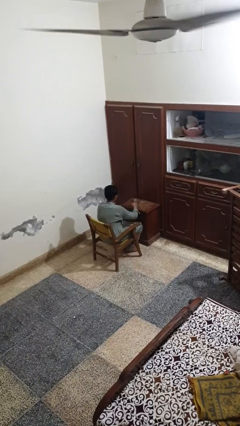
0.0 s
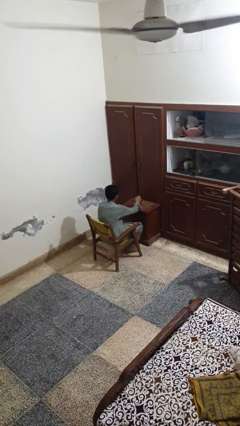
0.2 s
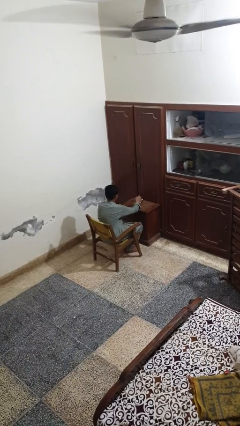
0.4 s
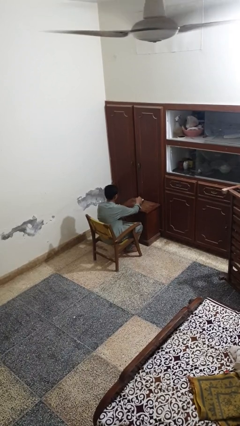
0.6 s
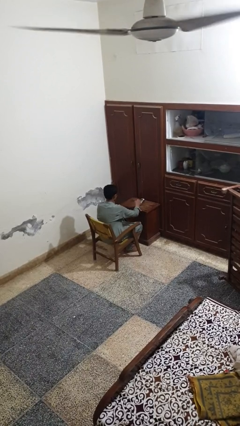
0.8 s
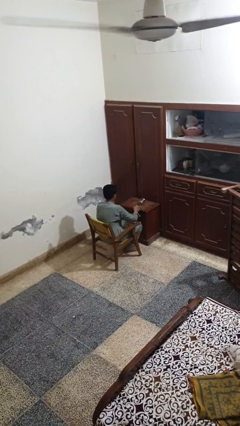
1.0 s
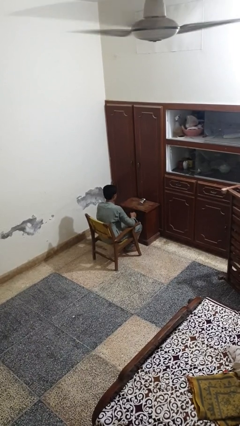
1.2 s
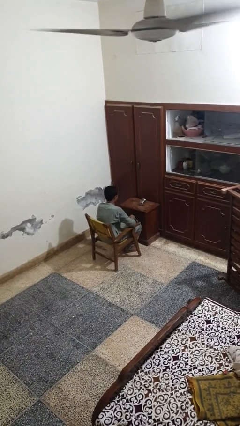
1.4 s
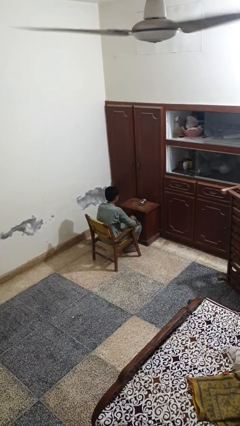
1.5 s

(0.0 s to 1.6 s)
person knocks over glass

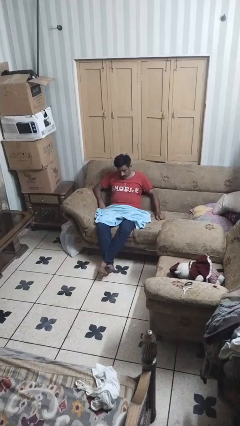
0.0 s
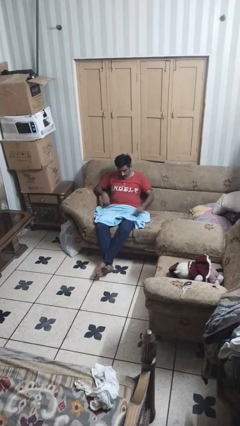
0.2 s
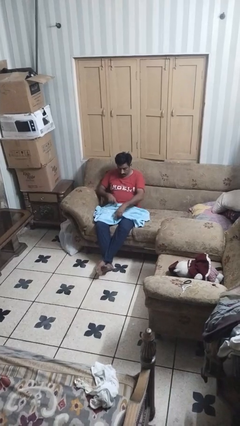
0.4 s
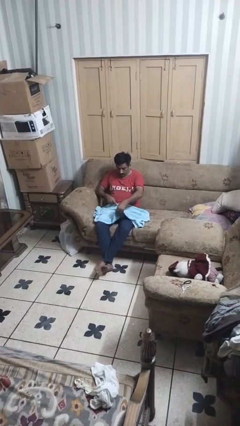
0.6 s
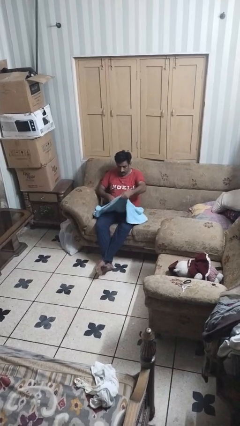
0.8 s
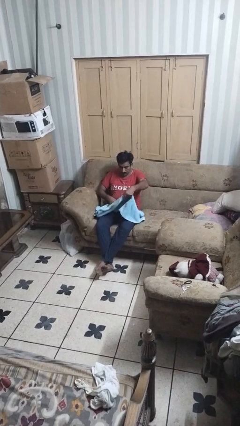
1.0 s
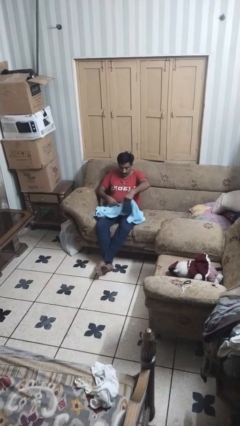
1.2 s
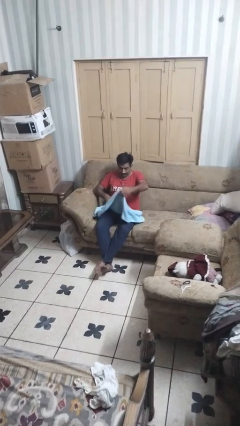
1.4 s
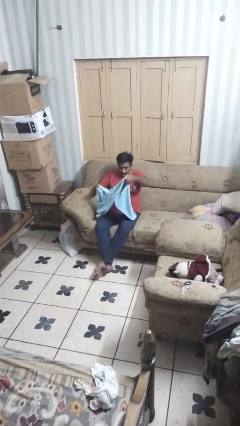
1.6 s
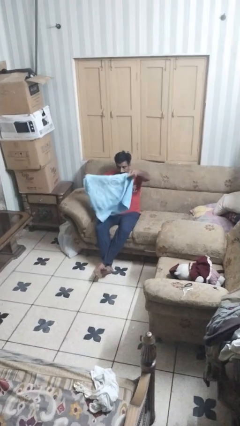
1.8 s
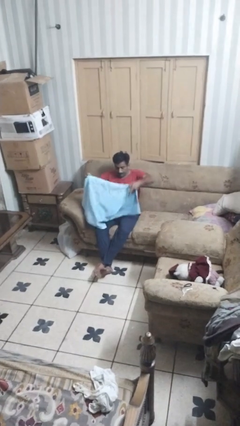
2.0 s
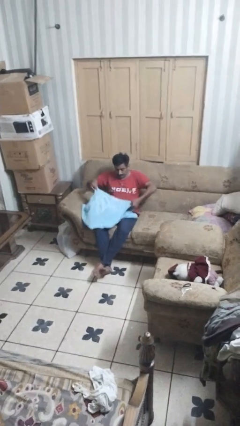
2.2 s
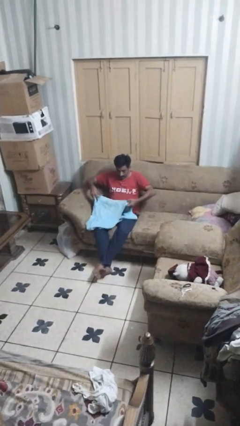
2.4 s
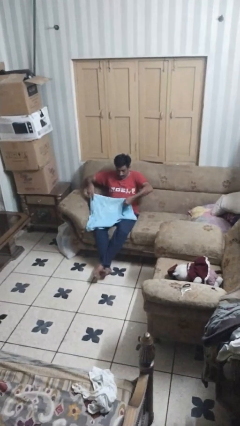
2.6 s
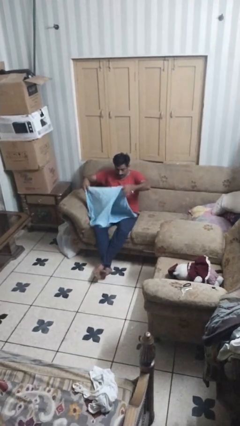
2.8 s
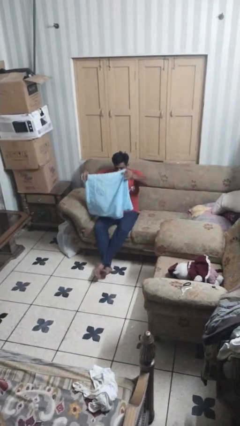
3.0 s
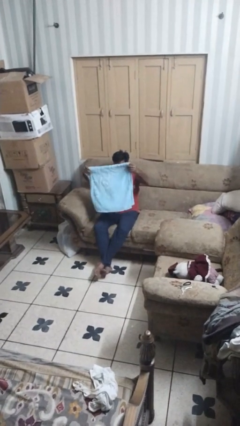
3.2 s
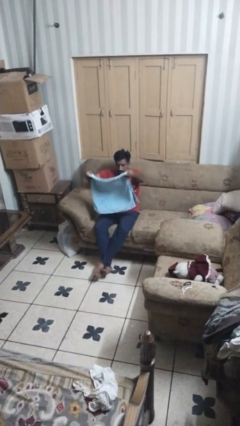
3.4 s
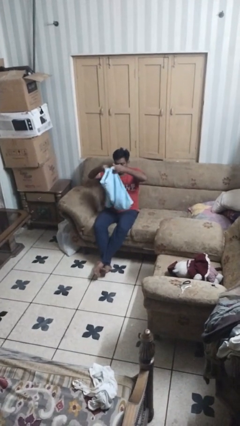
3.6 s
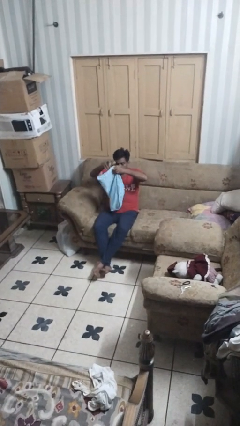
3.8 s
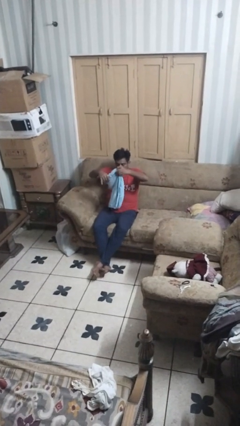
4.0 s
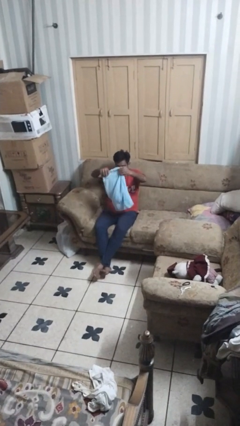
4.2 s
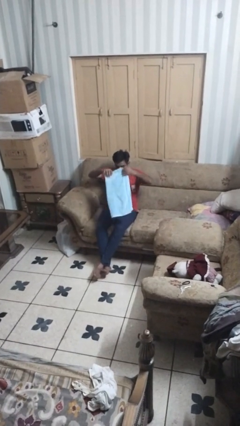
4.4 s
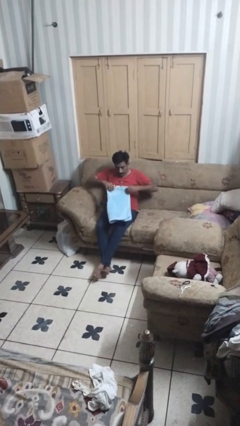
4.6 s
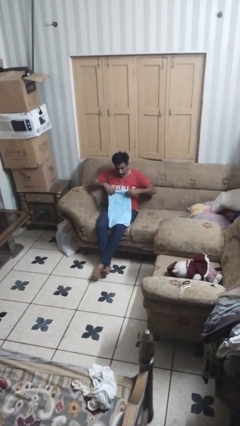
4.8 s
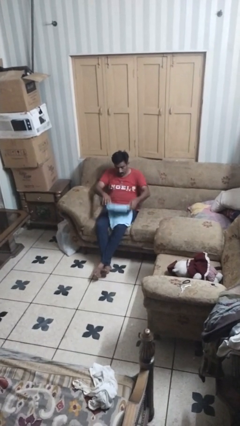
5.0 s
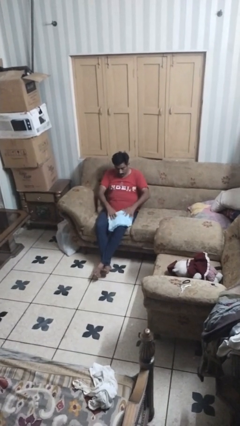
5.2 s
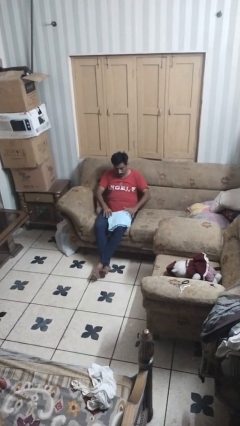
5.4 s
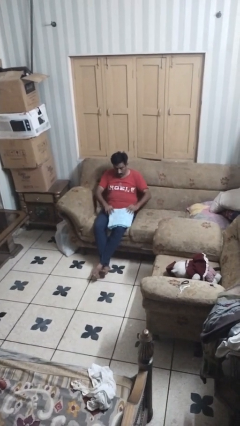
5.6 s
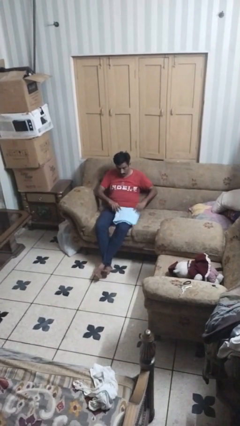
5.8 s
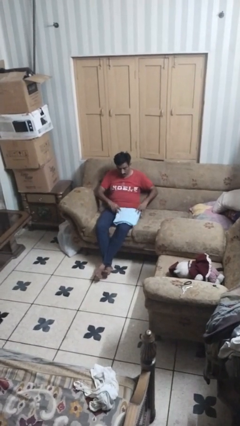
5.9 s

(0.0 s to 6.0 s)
person folds towel

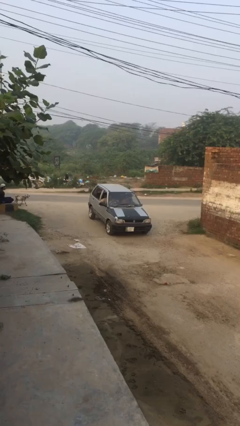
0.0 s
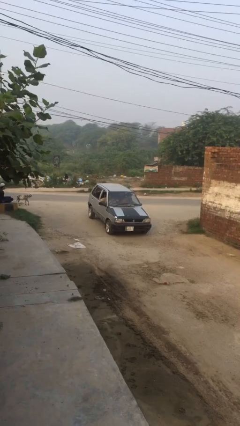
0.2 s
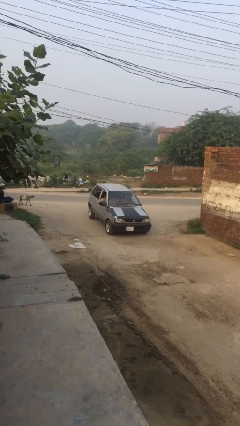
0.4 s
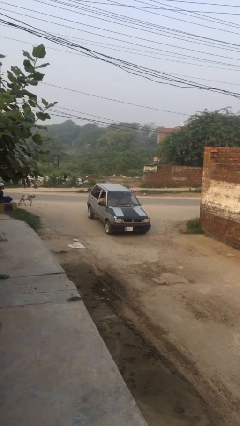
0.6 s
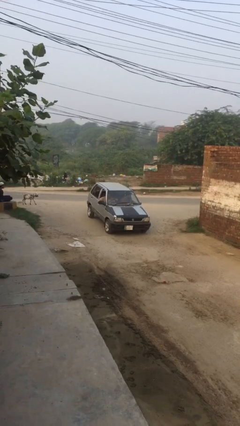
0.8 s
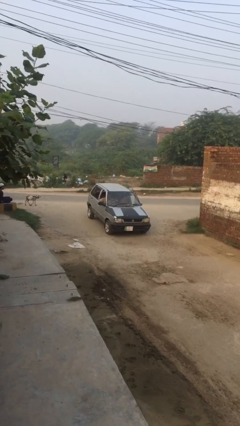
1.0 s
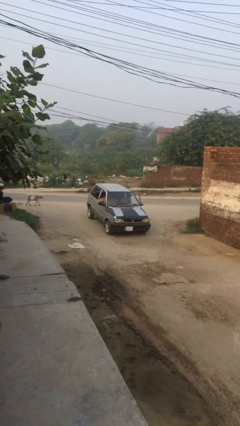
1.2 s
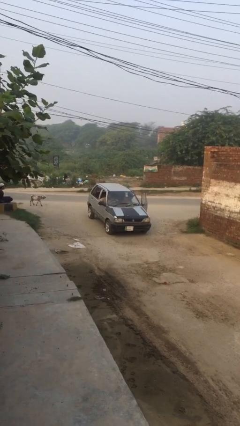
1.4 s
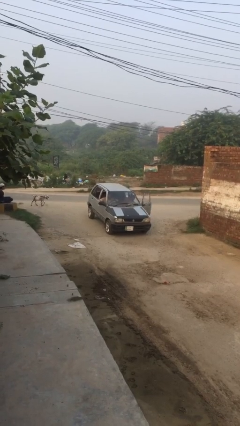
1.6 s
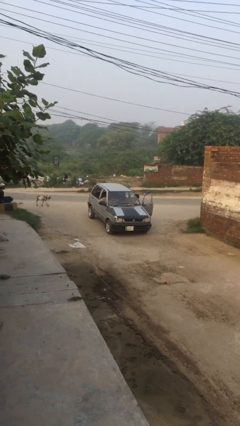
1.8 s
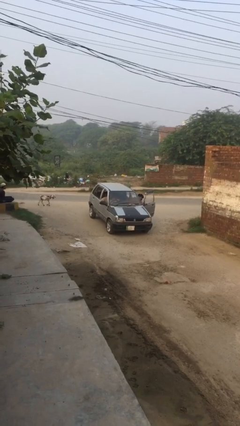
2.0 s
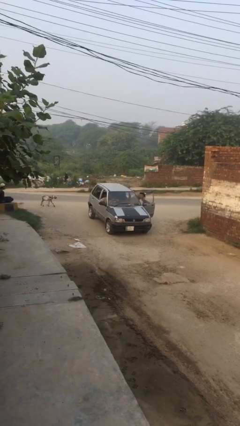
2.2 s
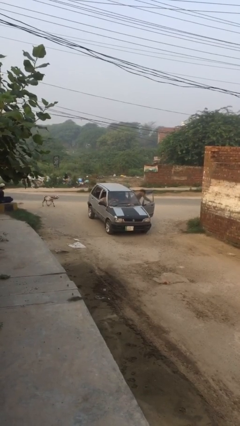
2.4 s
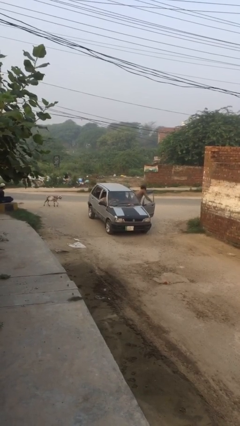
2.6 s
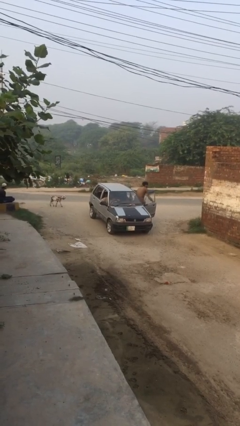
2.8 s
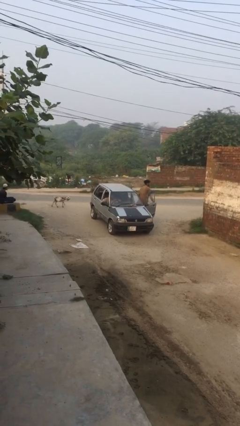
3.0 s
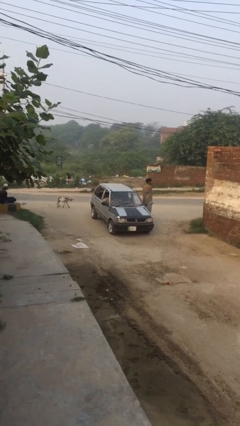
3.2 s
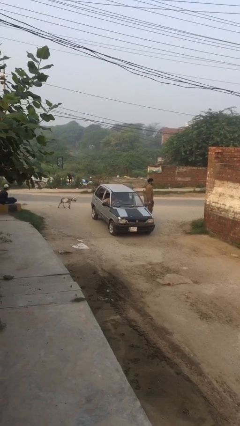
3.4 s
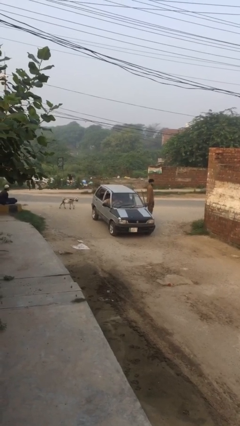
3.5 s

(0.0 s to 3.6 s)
car drops off person

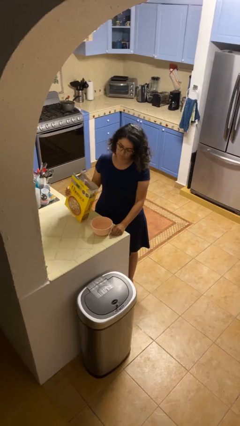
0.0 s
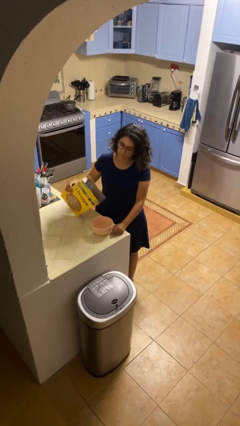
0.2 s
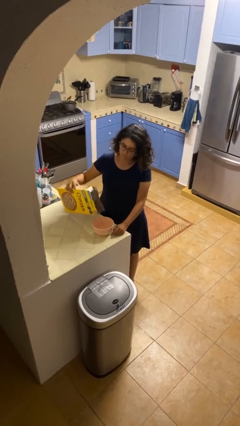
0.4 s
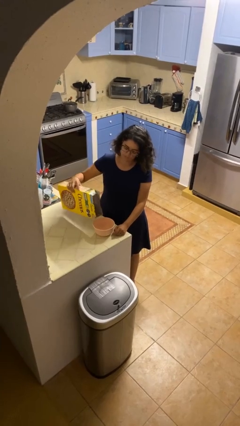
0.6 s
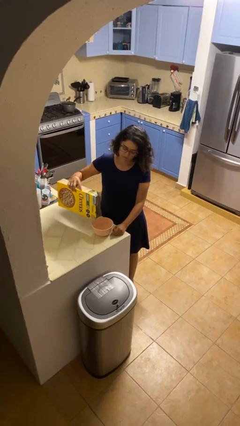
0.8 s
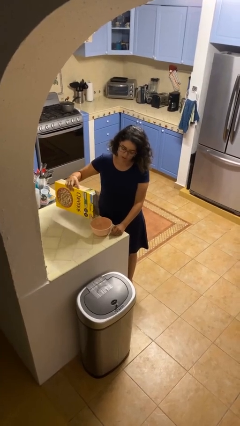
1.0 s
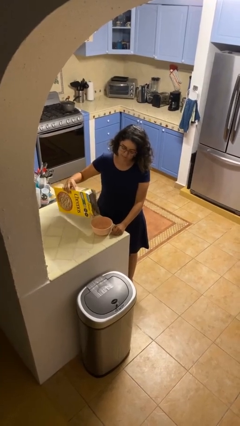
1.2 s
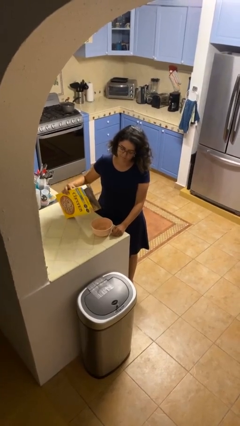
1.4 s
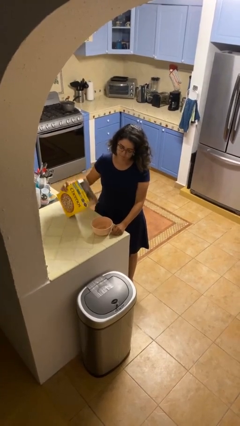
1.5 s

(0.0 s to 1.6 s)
person pours into bowl

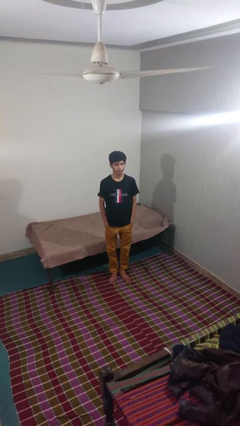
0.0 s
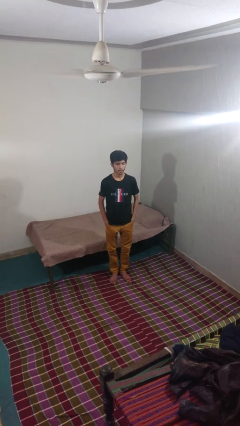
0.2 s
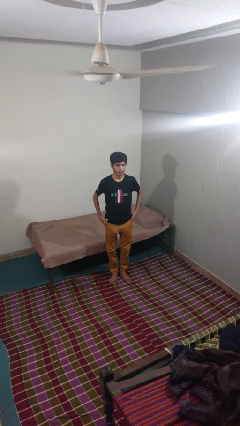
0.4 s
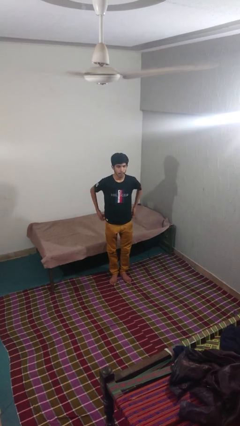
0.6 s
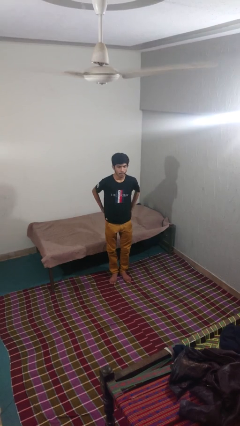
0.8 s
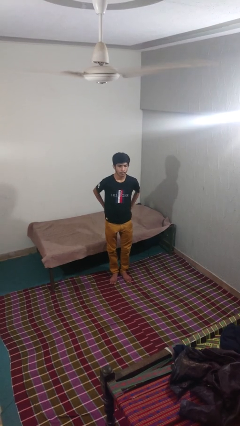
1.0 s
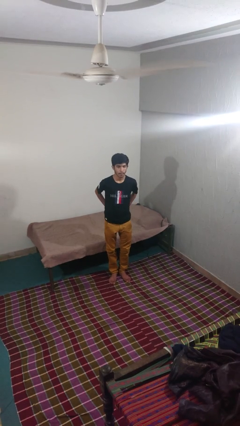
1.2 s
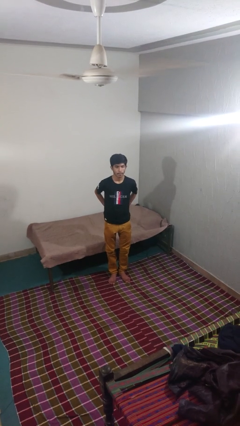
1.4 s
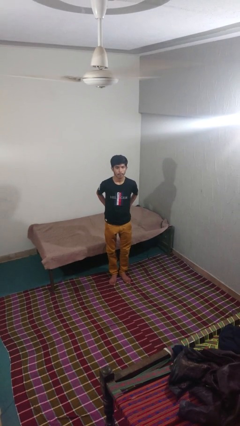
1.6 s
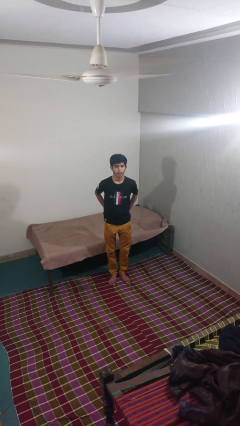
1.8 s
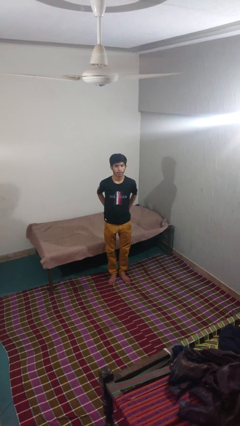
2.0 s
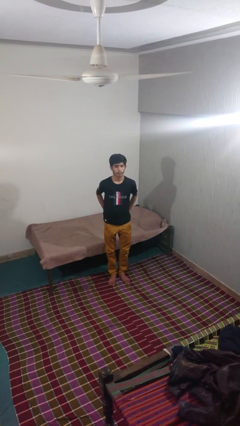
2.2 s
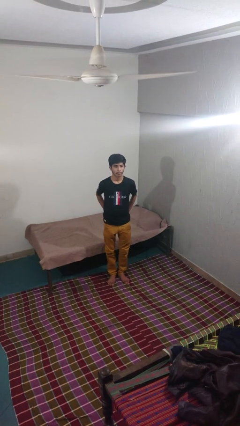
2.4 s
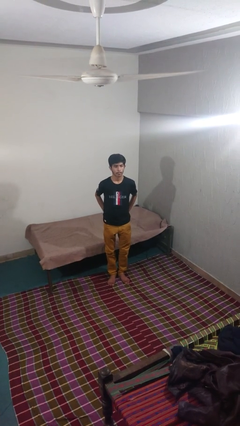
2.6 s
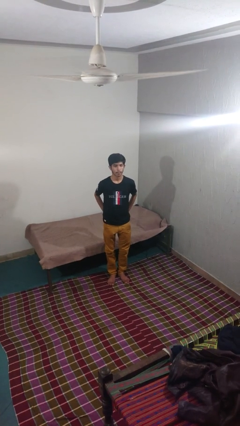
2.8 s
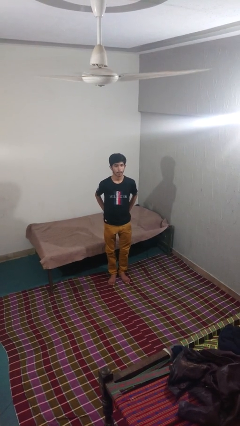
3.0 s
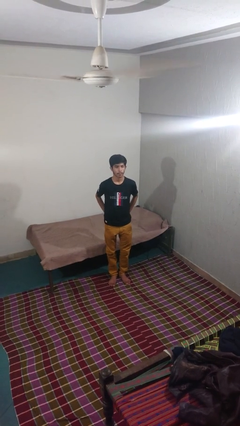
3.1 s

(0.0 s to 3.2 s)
person puts hands in back pockets

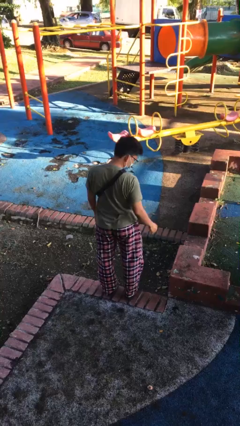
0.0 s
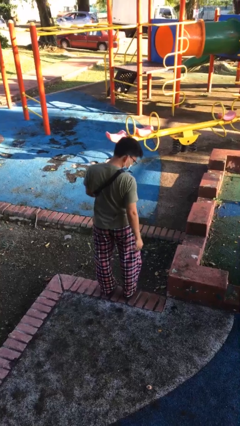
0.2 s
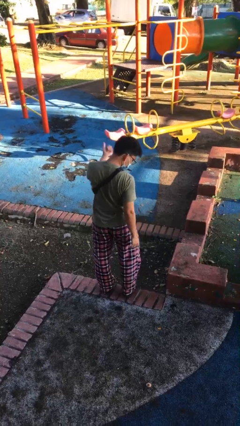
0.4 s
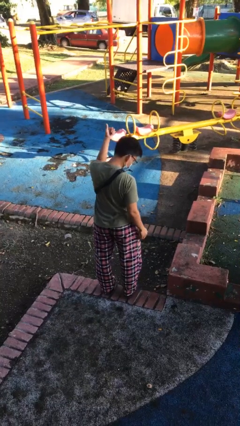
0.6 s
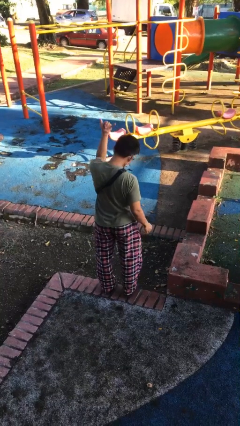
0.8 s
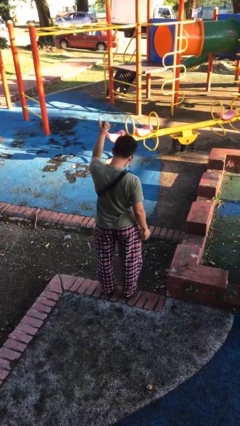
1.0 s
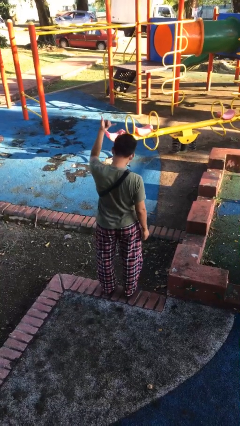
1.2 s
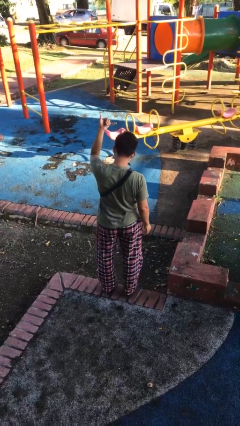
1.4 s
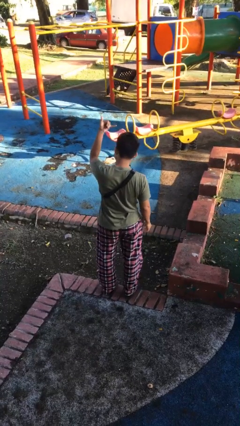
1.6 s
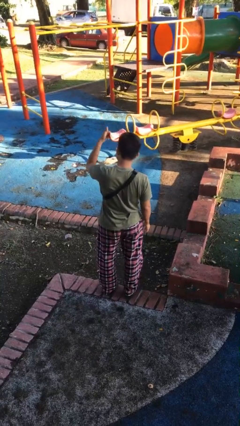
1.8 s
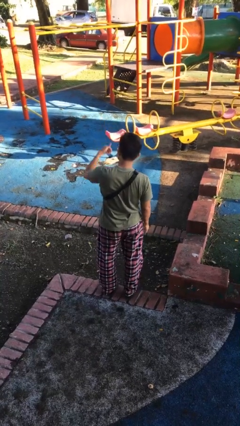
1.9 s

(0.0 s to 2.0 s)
person gestures hang loose
